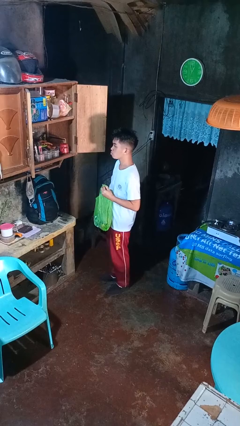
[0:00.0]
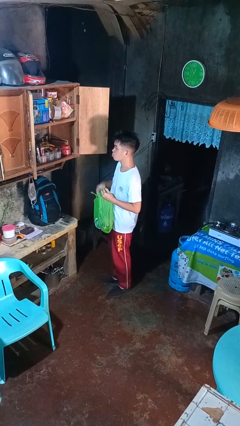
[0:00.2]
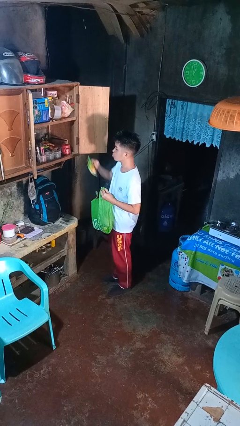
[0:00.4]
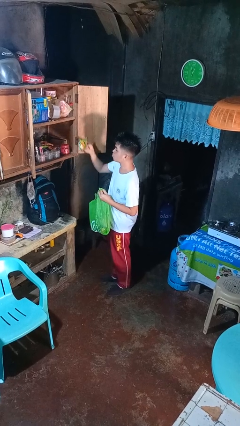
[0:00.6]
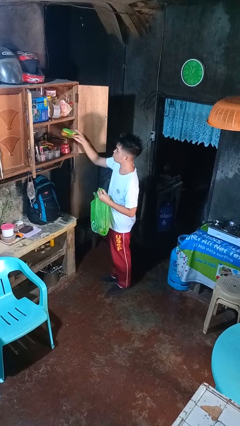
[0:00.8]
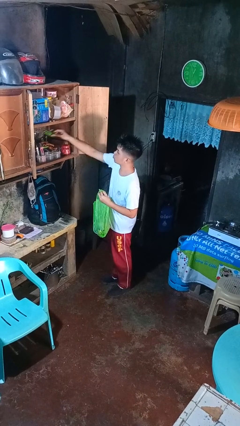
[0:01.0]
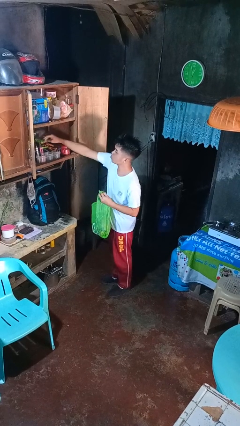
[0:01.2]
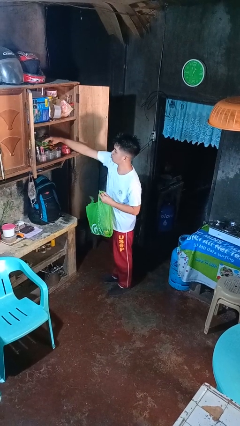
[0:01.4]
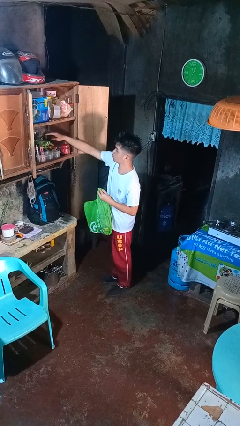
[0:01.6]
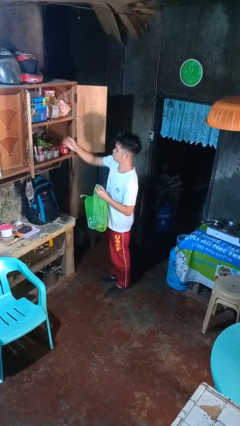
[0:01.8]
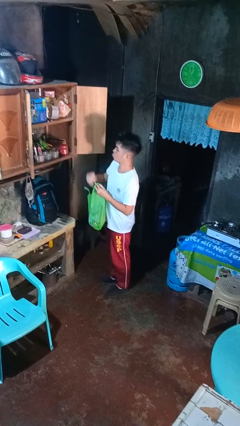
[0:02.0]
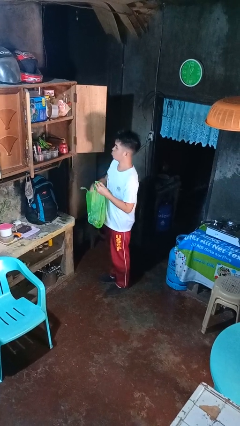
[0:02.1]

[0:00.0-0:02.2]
person loads groceries into cabinet

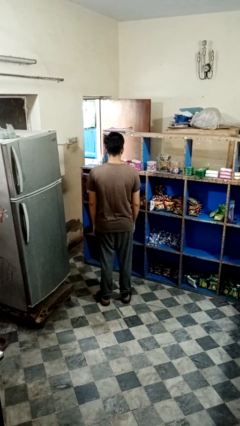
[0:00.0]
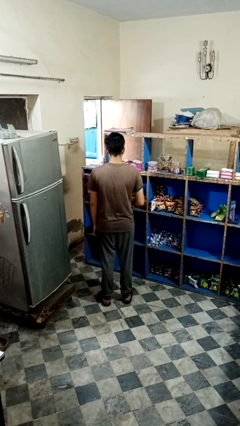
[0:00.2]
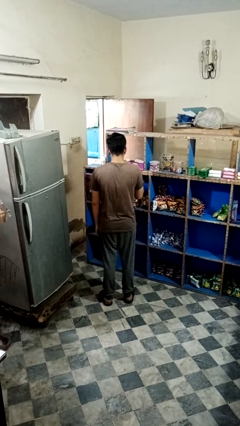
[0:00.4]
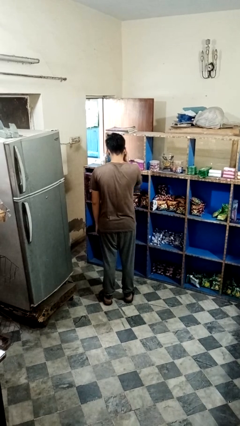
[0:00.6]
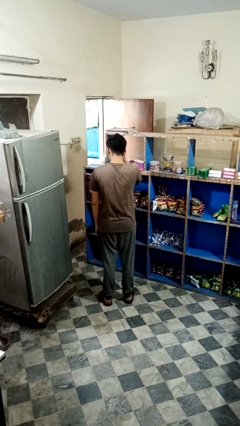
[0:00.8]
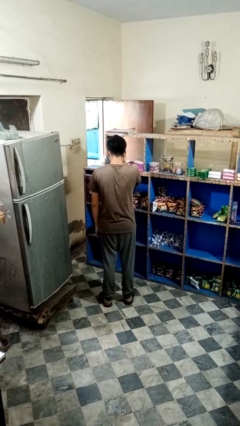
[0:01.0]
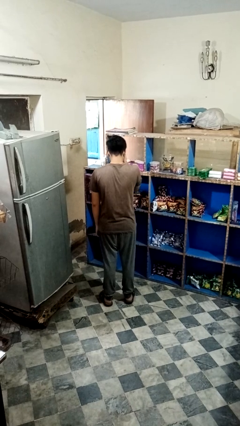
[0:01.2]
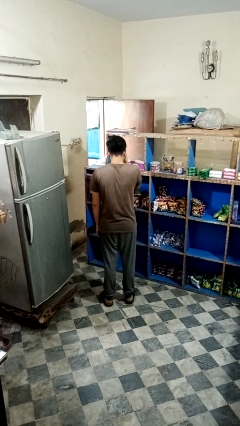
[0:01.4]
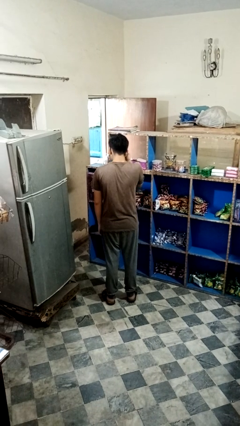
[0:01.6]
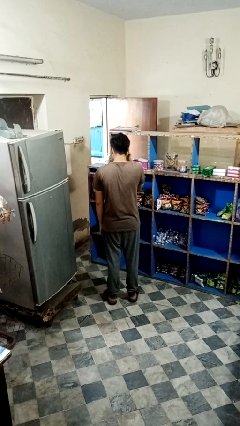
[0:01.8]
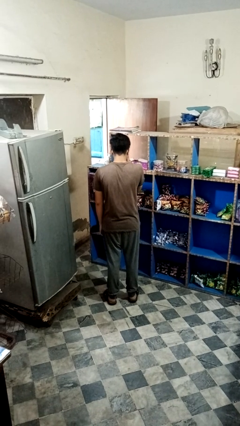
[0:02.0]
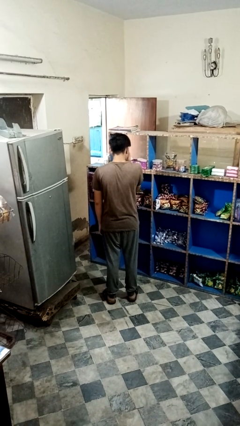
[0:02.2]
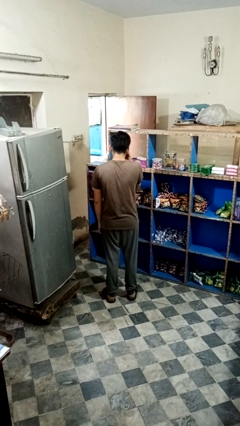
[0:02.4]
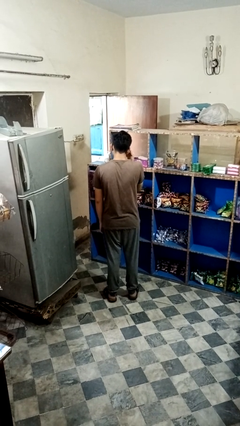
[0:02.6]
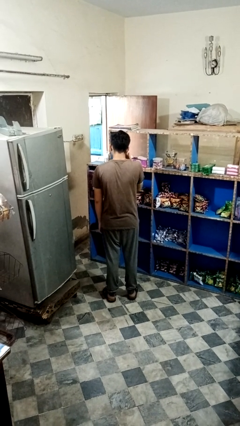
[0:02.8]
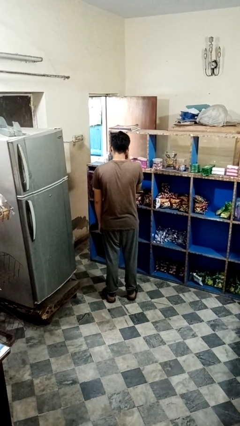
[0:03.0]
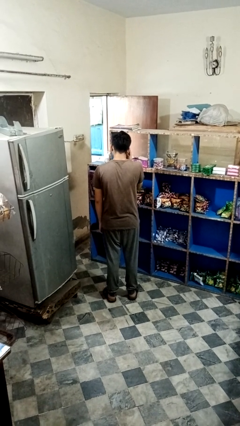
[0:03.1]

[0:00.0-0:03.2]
person rubs eyes

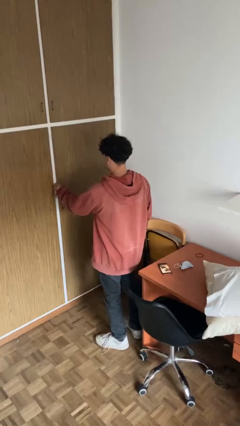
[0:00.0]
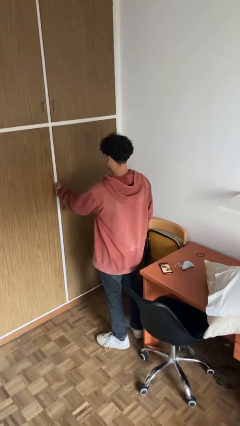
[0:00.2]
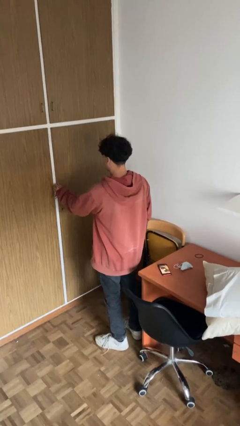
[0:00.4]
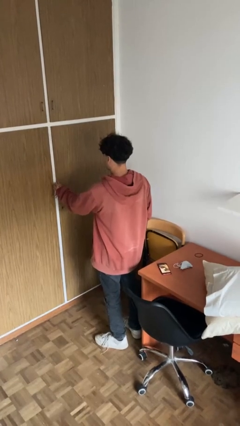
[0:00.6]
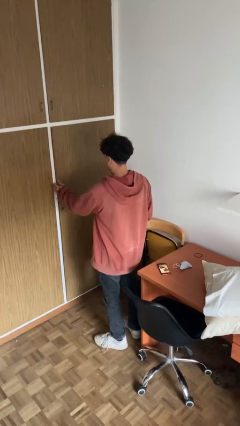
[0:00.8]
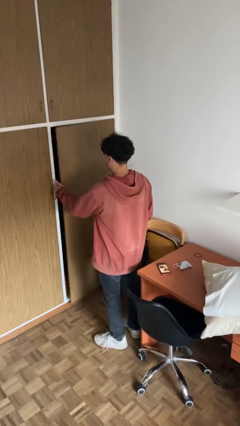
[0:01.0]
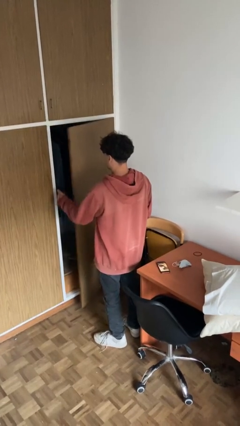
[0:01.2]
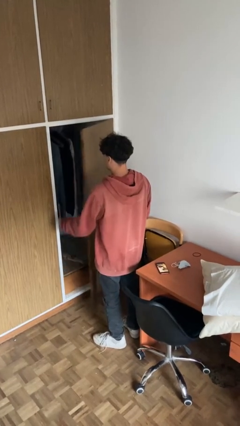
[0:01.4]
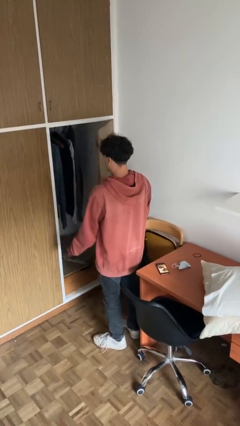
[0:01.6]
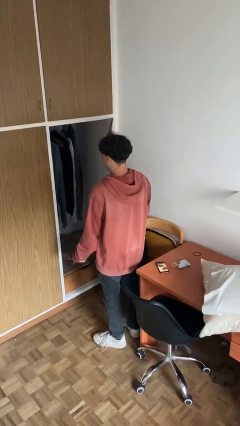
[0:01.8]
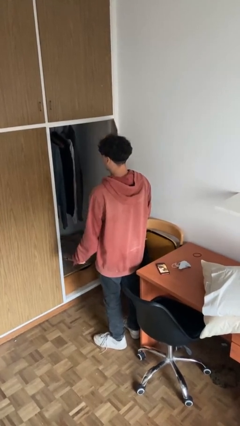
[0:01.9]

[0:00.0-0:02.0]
person opens closet door

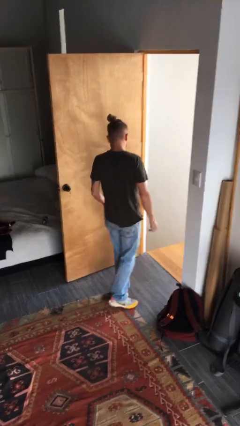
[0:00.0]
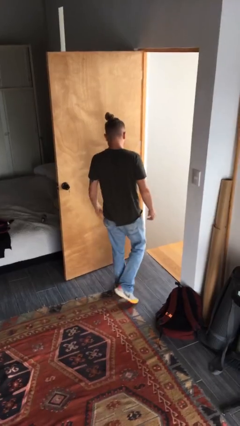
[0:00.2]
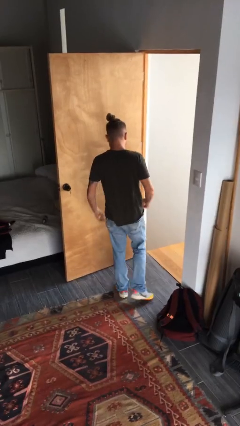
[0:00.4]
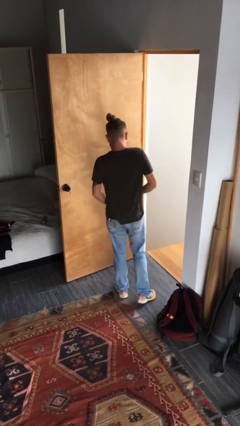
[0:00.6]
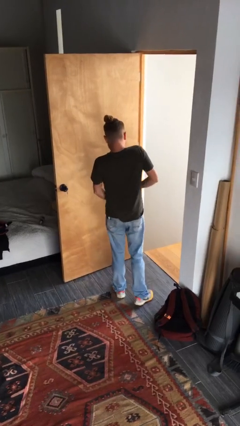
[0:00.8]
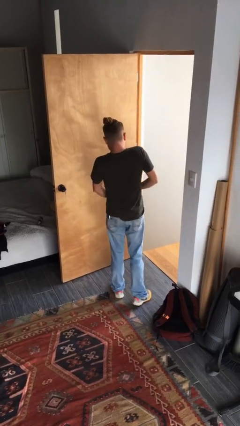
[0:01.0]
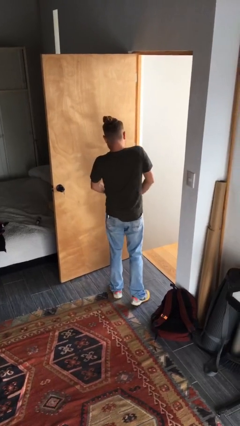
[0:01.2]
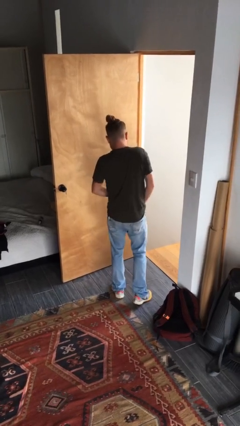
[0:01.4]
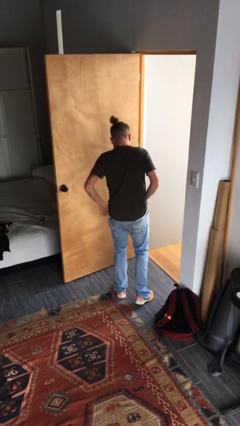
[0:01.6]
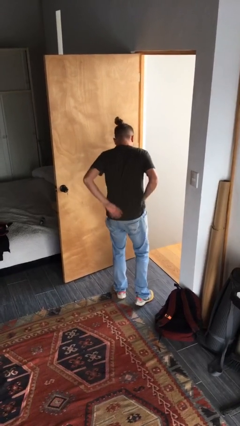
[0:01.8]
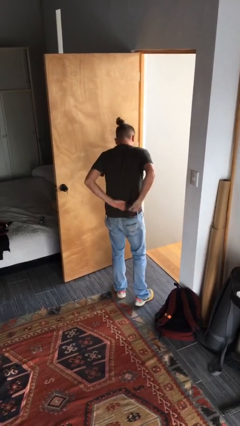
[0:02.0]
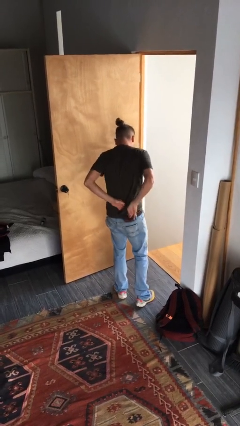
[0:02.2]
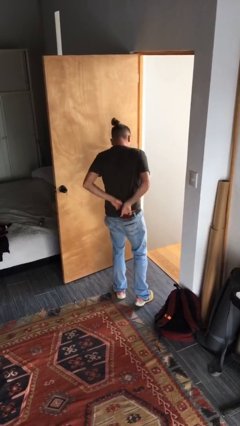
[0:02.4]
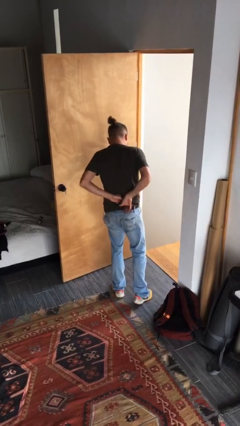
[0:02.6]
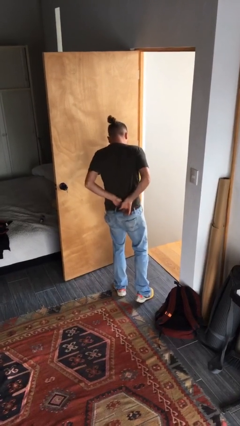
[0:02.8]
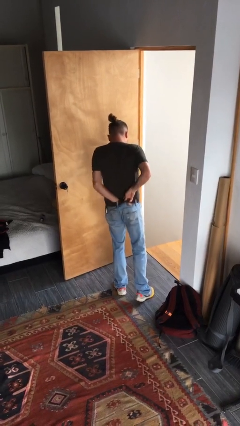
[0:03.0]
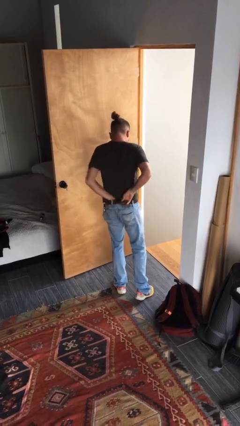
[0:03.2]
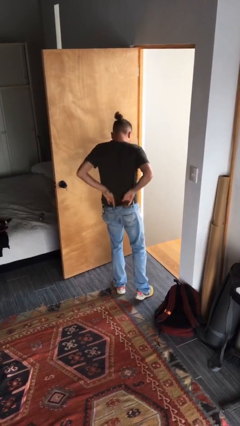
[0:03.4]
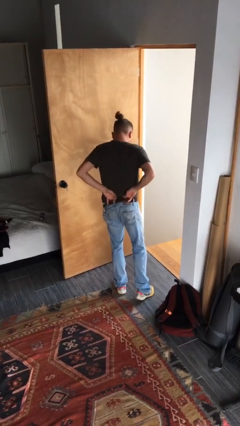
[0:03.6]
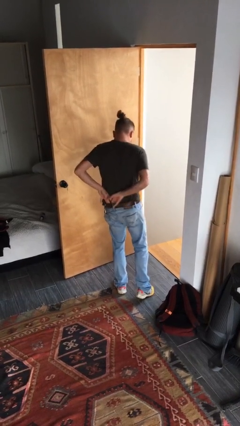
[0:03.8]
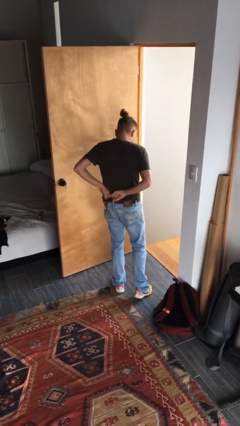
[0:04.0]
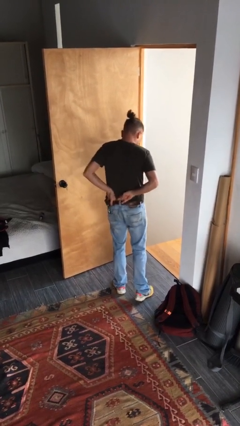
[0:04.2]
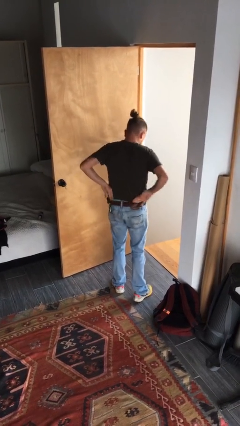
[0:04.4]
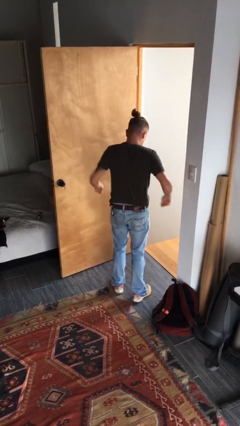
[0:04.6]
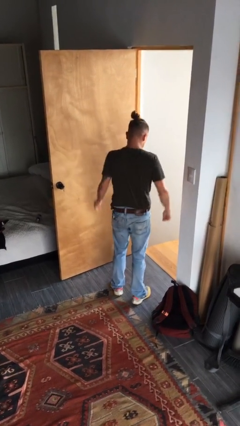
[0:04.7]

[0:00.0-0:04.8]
person tucks in shirt

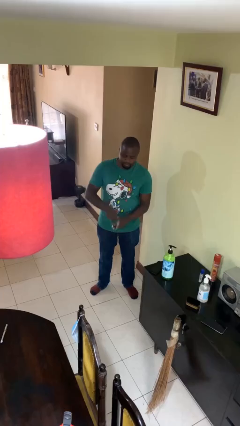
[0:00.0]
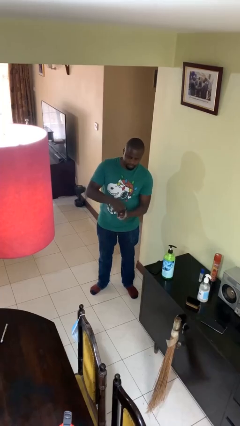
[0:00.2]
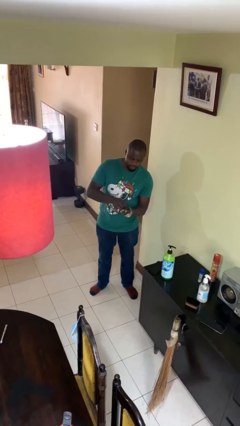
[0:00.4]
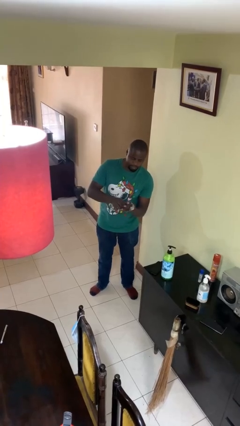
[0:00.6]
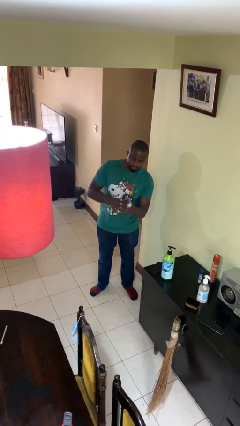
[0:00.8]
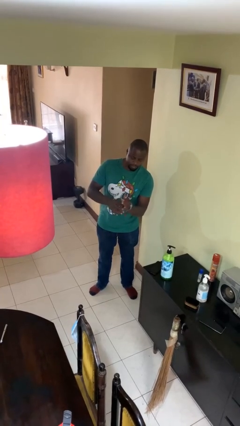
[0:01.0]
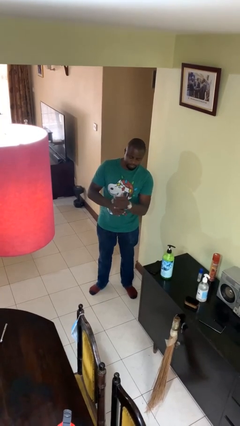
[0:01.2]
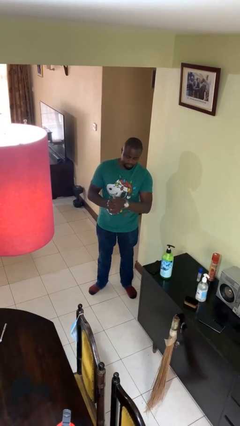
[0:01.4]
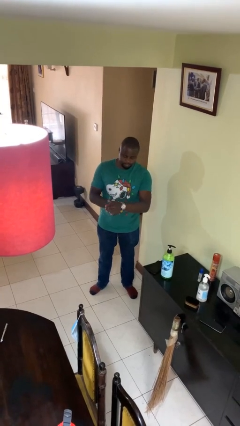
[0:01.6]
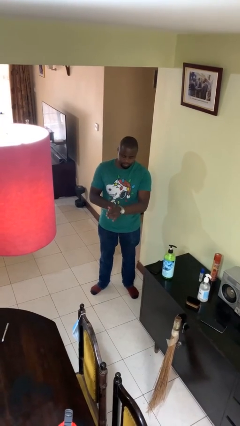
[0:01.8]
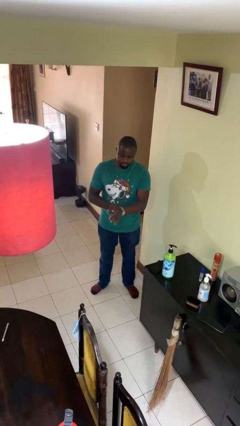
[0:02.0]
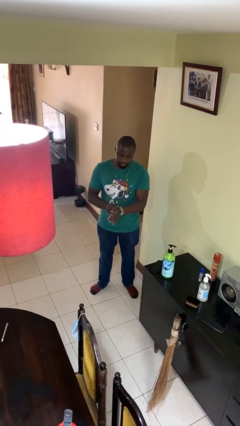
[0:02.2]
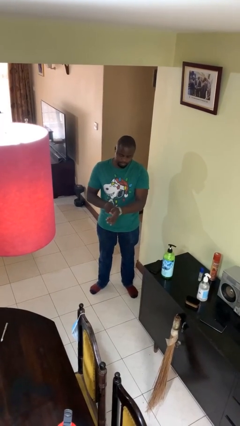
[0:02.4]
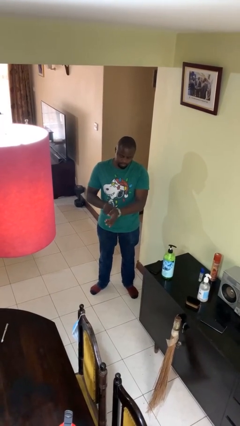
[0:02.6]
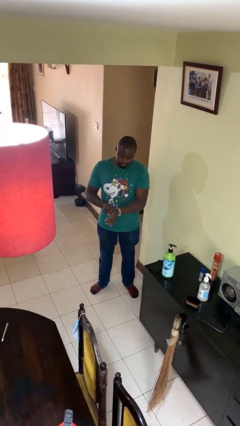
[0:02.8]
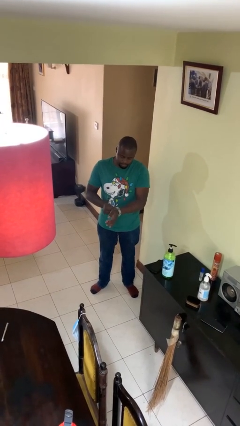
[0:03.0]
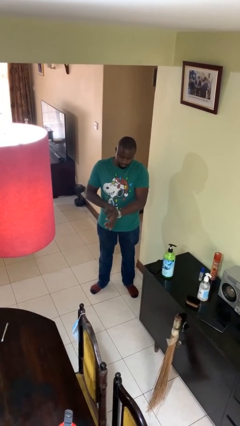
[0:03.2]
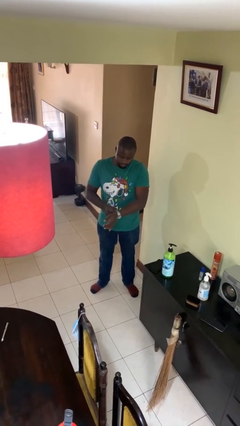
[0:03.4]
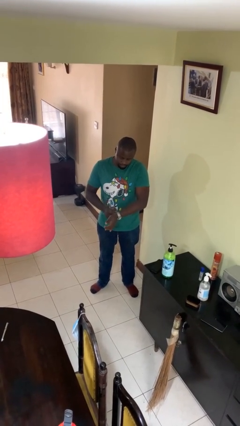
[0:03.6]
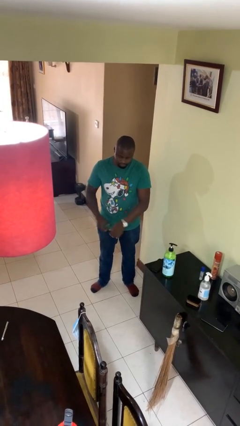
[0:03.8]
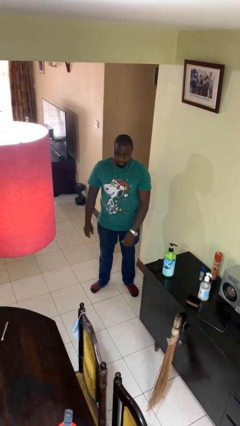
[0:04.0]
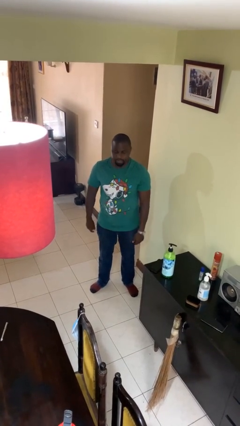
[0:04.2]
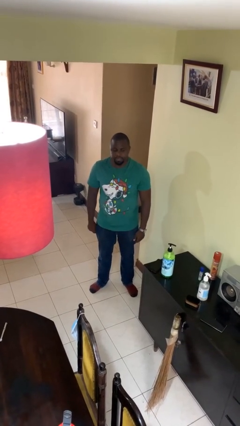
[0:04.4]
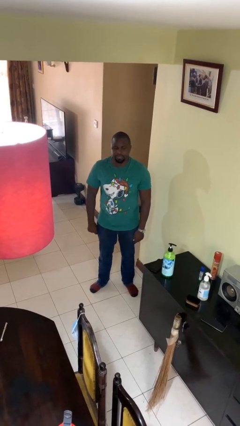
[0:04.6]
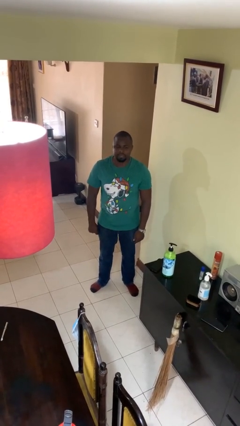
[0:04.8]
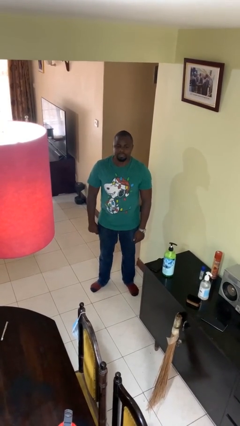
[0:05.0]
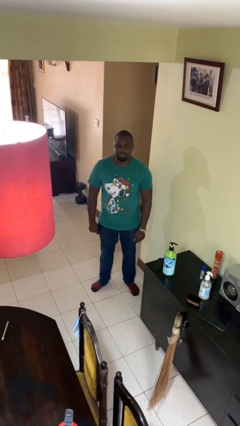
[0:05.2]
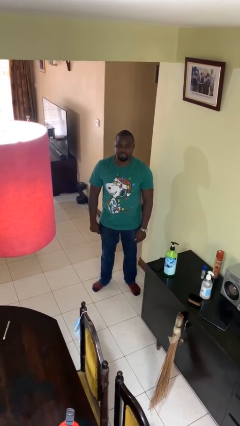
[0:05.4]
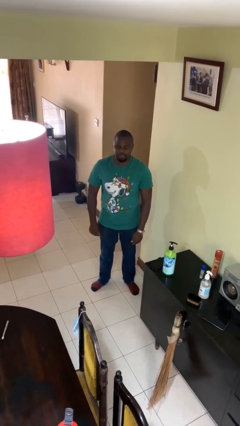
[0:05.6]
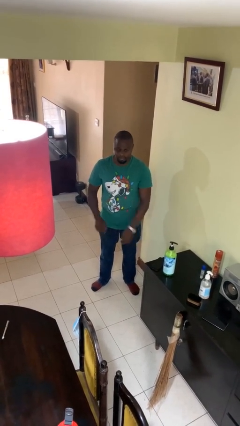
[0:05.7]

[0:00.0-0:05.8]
person puts on wristwatch
